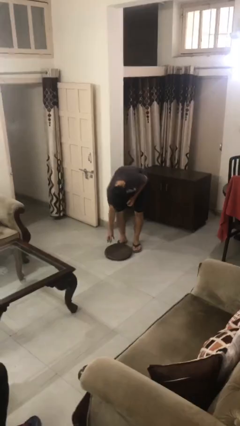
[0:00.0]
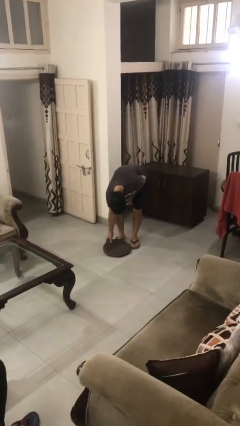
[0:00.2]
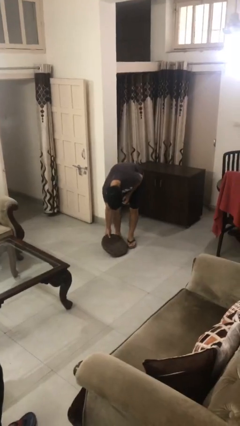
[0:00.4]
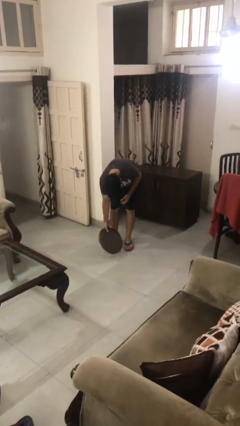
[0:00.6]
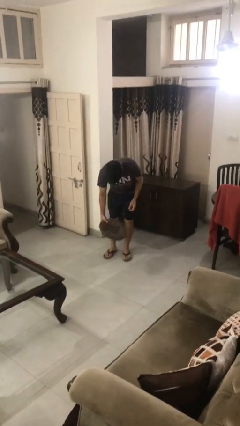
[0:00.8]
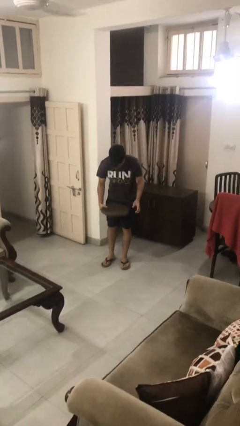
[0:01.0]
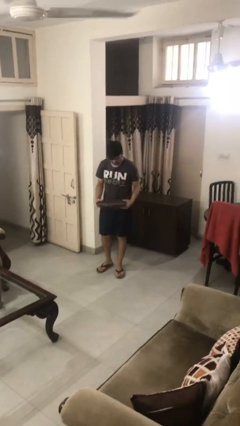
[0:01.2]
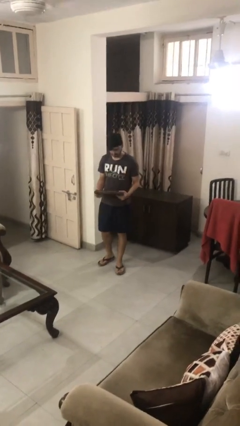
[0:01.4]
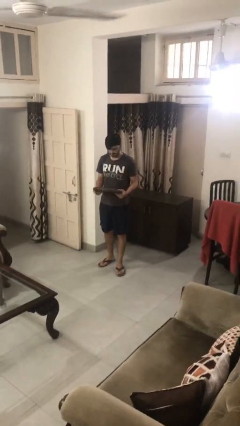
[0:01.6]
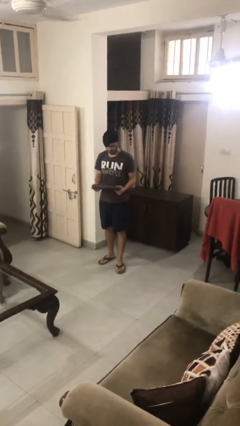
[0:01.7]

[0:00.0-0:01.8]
person picks up object from floor

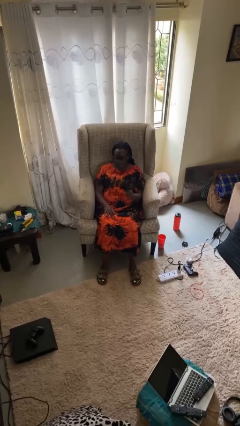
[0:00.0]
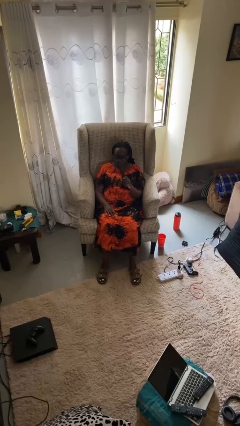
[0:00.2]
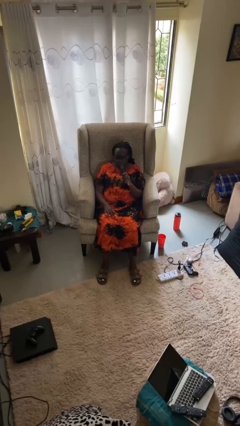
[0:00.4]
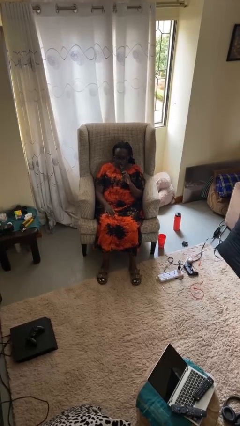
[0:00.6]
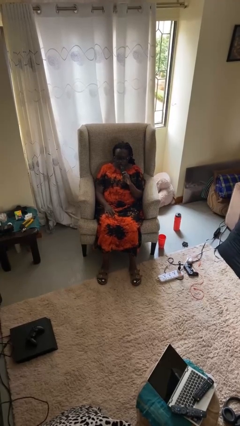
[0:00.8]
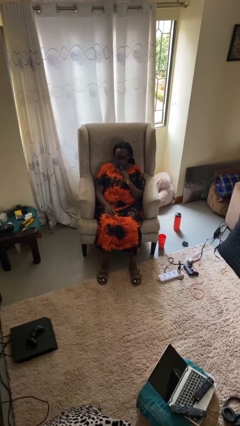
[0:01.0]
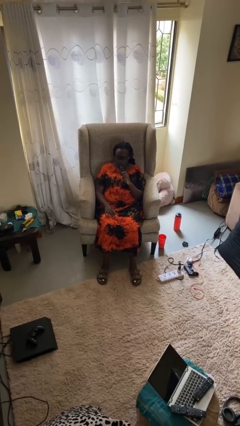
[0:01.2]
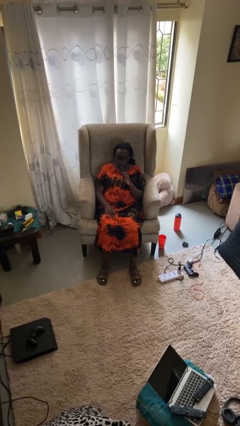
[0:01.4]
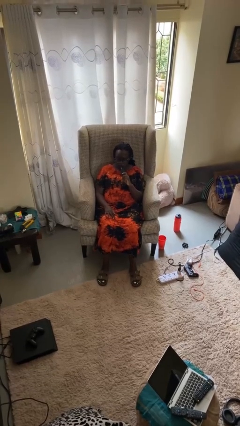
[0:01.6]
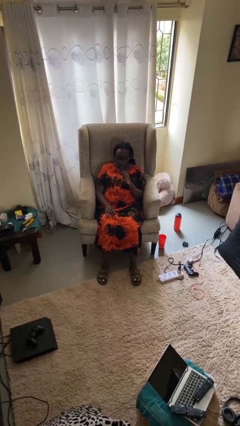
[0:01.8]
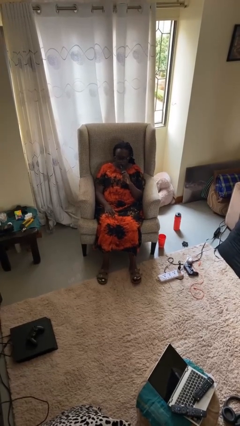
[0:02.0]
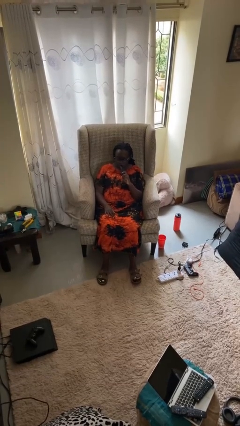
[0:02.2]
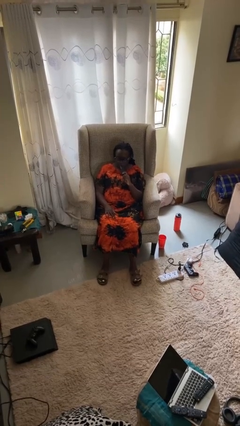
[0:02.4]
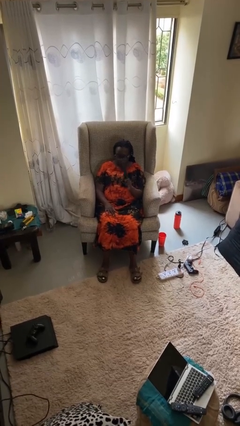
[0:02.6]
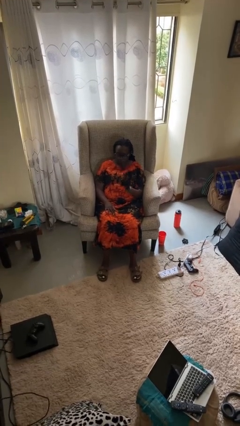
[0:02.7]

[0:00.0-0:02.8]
person vapes

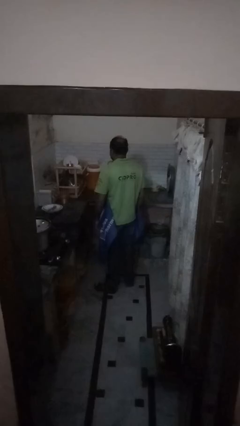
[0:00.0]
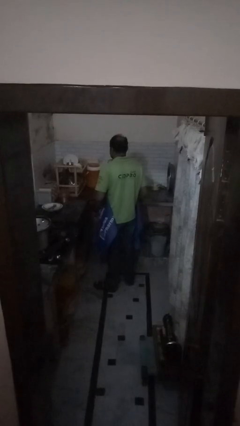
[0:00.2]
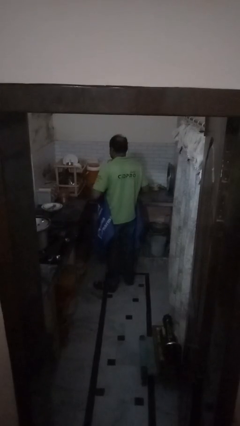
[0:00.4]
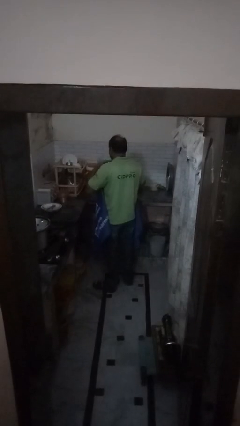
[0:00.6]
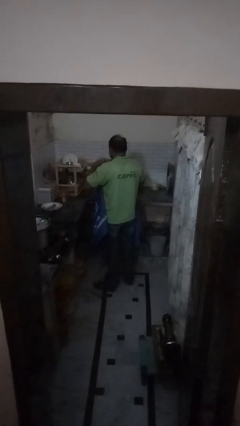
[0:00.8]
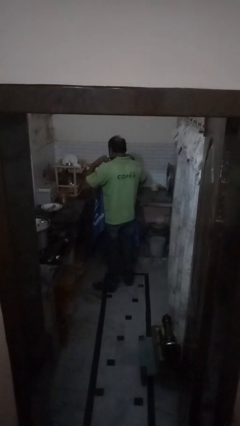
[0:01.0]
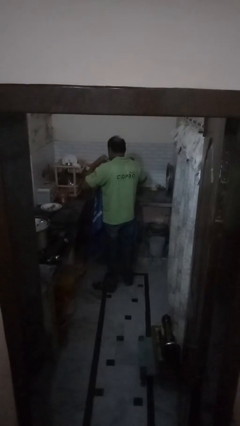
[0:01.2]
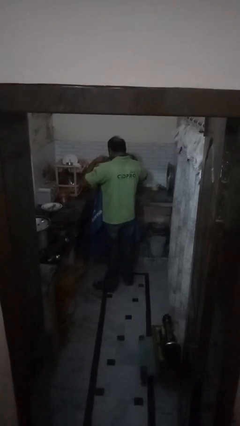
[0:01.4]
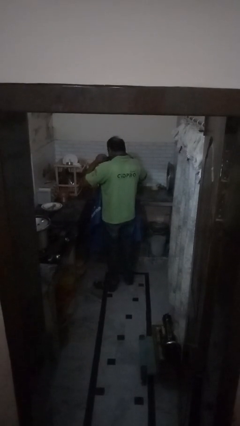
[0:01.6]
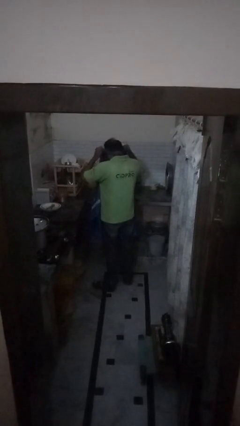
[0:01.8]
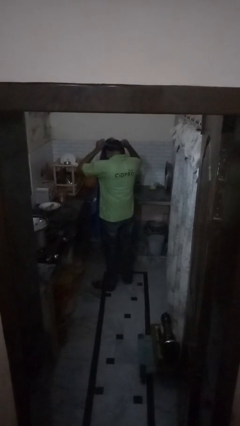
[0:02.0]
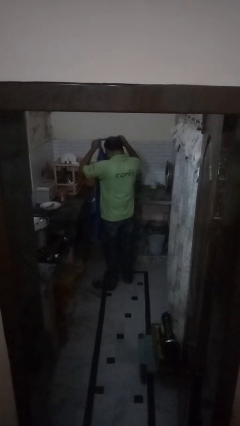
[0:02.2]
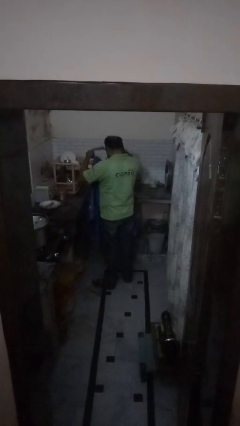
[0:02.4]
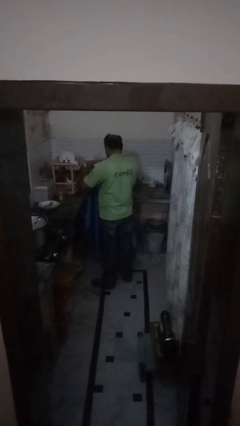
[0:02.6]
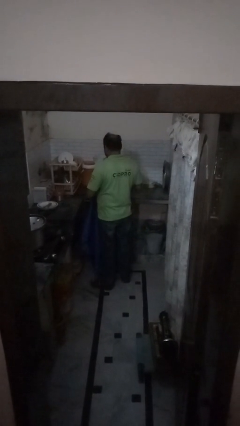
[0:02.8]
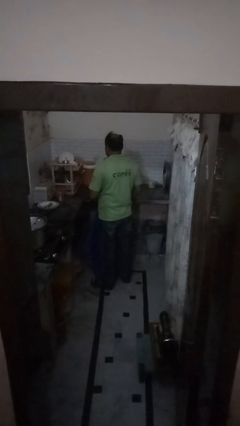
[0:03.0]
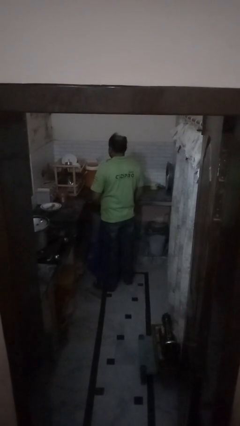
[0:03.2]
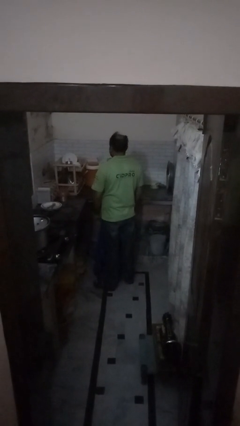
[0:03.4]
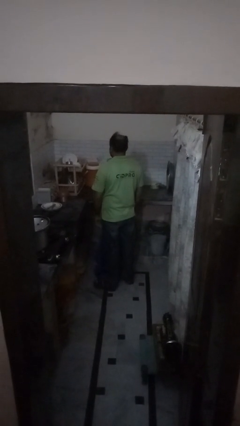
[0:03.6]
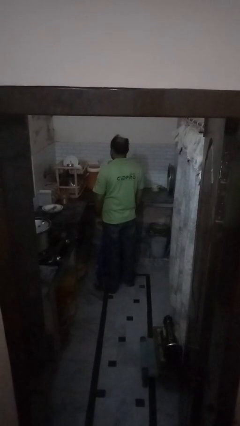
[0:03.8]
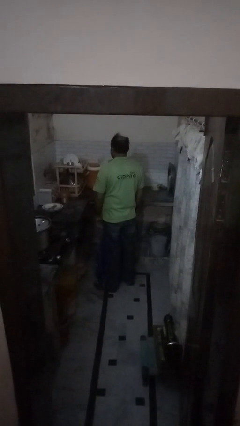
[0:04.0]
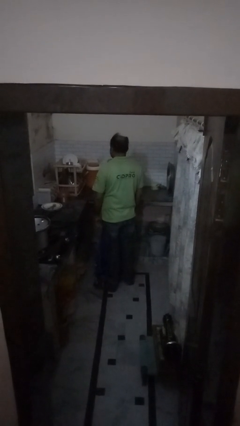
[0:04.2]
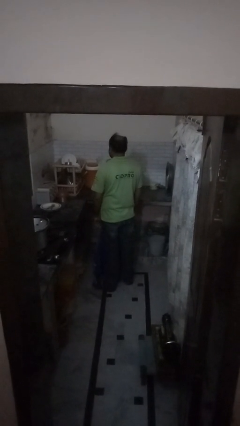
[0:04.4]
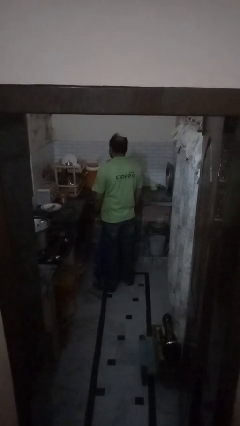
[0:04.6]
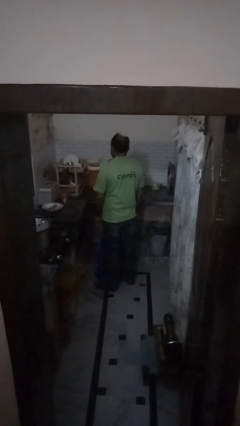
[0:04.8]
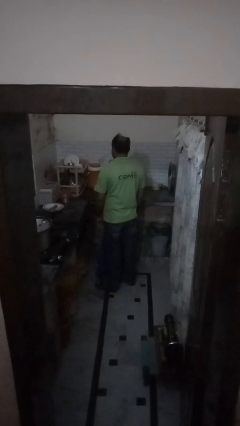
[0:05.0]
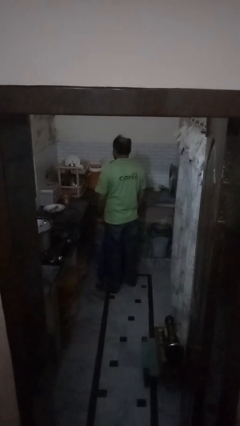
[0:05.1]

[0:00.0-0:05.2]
person takes off apron

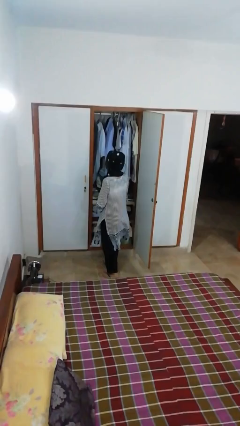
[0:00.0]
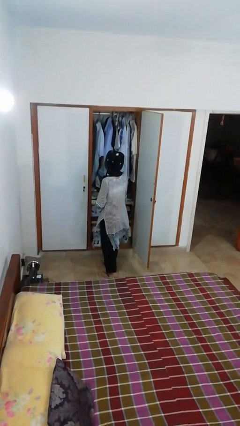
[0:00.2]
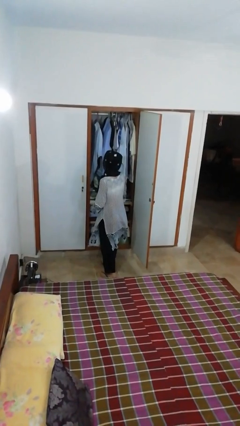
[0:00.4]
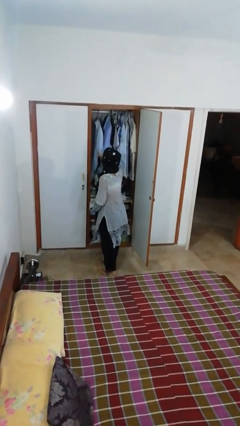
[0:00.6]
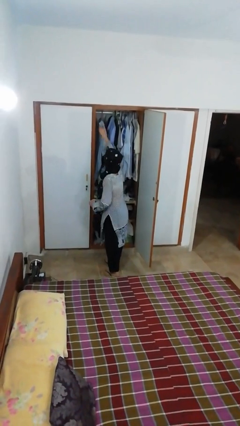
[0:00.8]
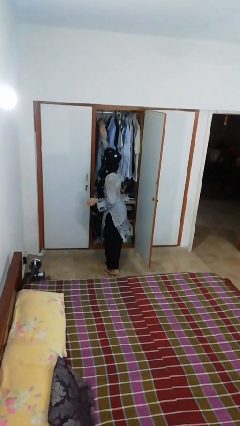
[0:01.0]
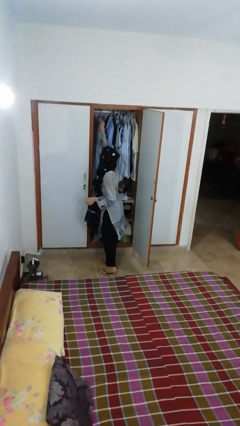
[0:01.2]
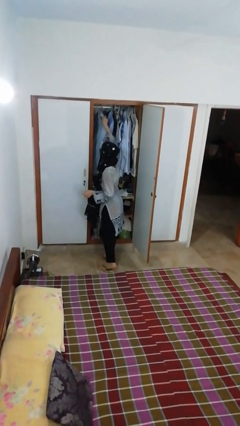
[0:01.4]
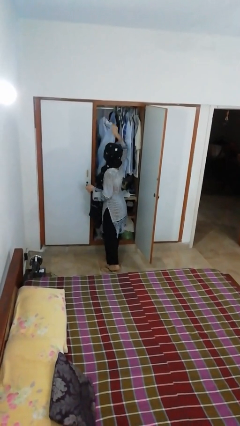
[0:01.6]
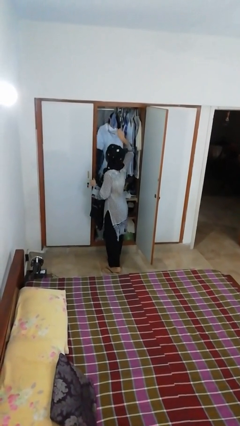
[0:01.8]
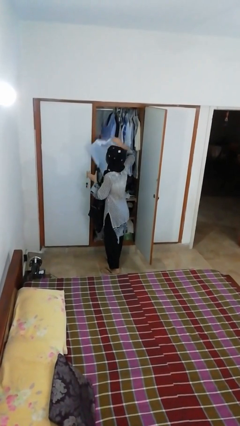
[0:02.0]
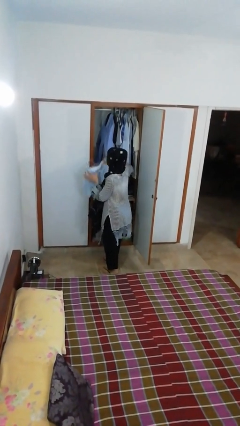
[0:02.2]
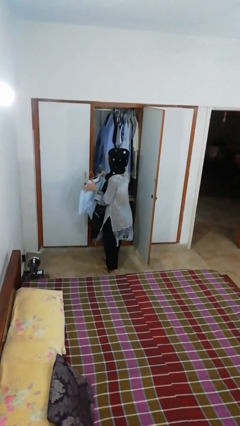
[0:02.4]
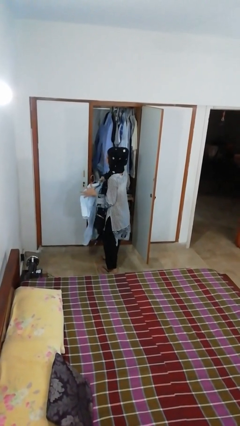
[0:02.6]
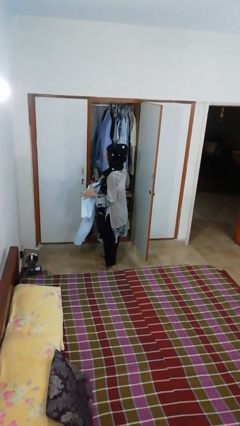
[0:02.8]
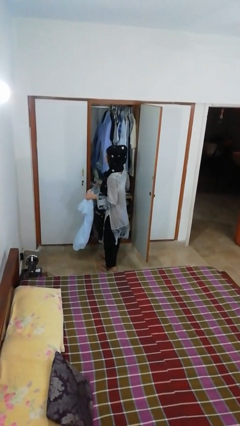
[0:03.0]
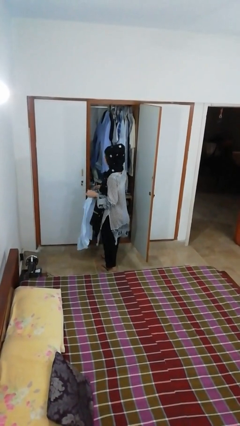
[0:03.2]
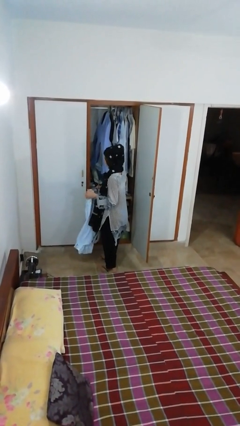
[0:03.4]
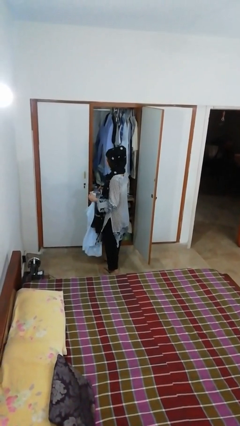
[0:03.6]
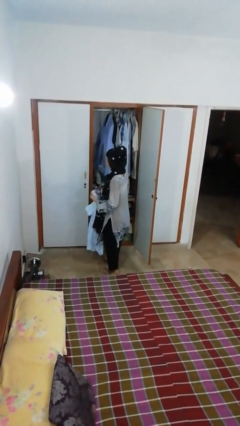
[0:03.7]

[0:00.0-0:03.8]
person takes clothes from closet

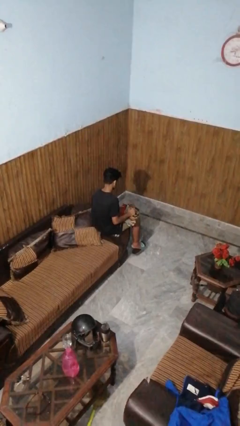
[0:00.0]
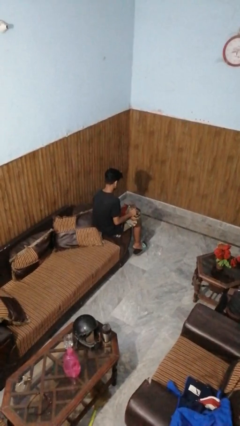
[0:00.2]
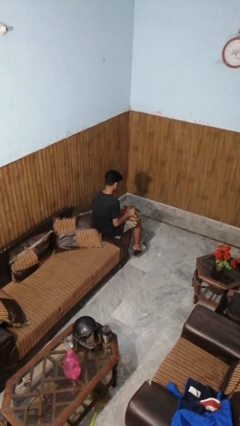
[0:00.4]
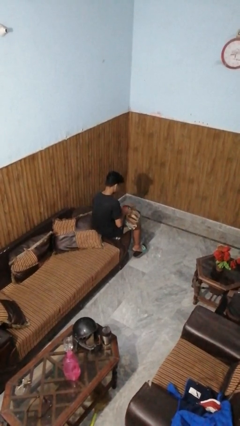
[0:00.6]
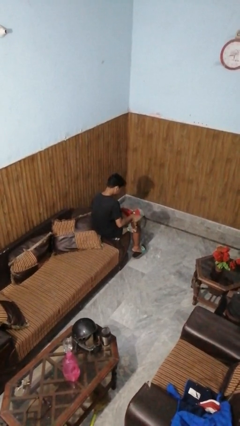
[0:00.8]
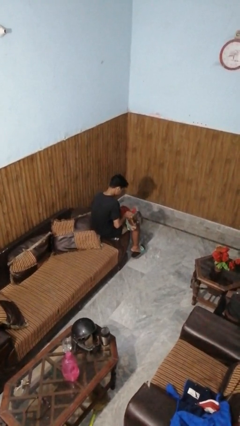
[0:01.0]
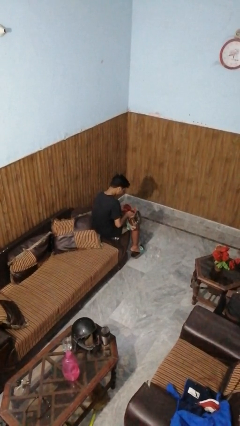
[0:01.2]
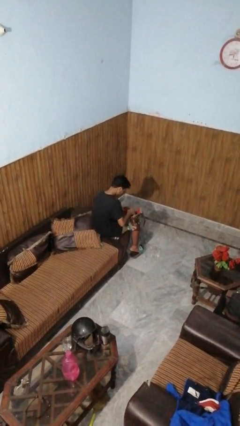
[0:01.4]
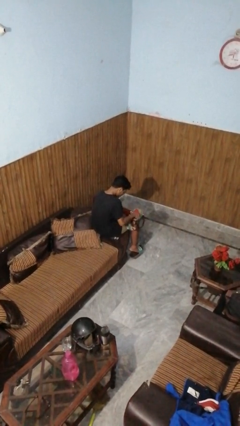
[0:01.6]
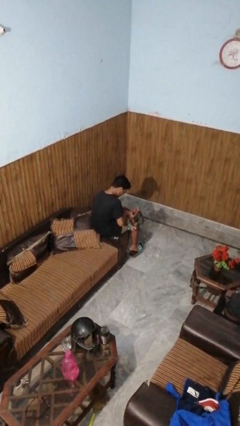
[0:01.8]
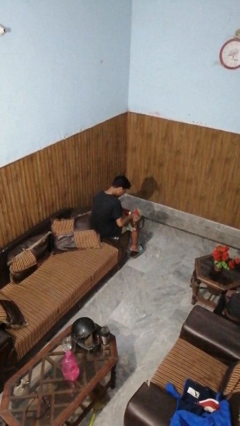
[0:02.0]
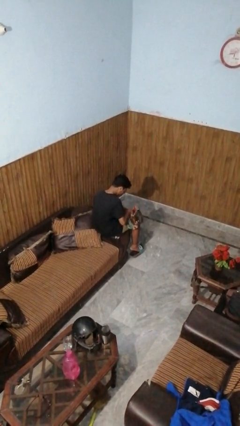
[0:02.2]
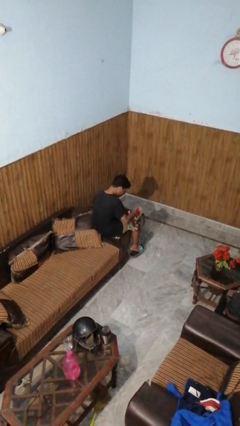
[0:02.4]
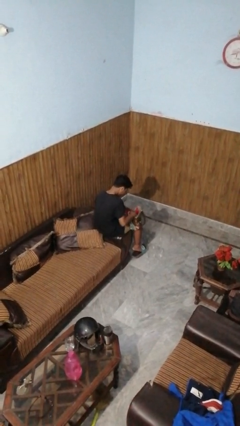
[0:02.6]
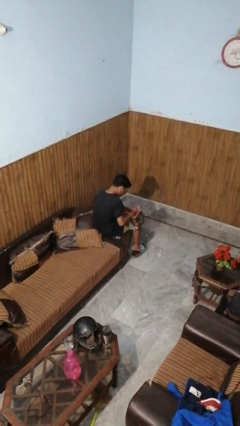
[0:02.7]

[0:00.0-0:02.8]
person searches in purse

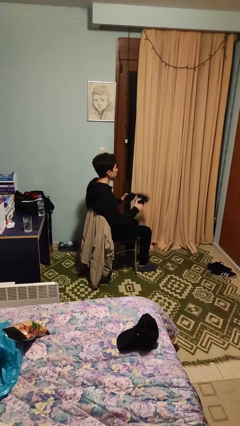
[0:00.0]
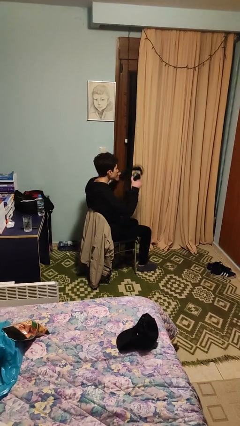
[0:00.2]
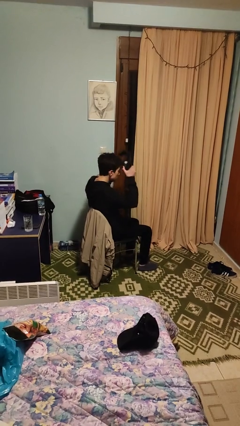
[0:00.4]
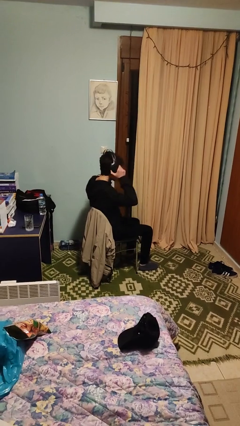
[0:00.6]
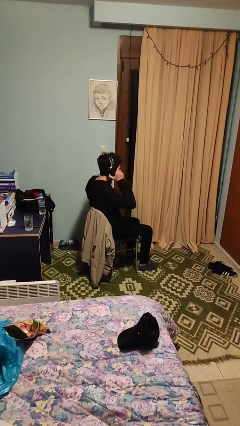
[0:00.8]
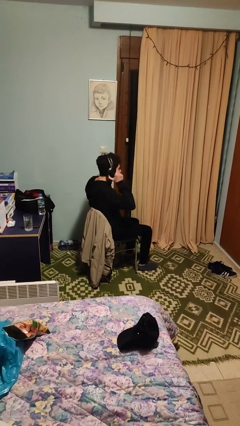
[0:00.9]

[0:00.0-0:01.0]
person puts on headphones
